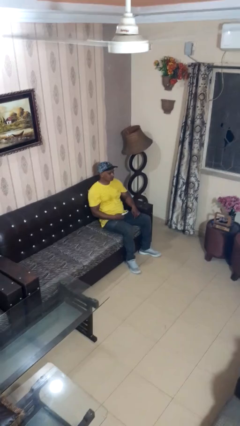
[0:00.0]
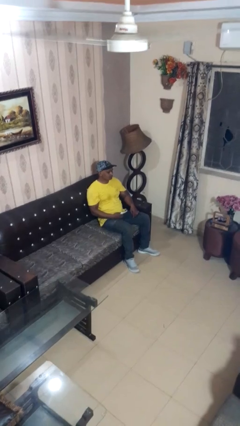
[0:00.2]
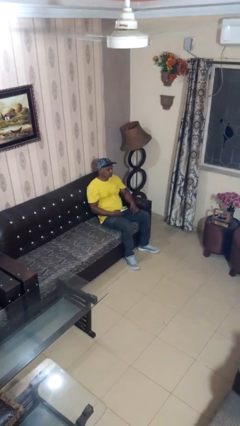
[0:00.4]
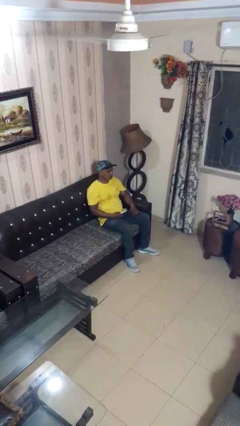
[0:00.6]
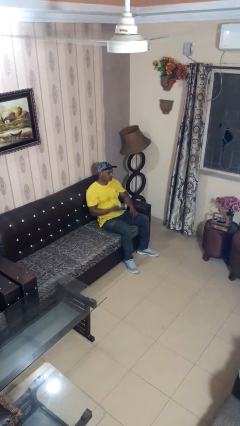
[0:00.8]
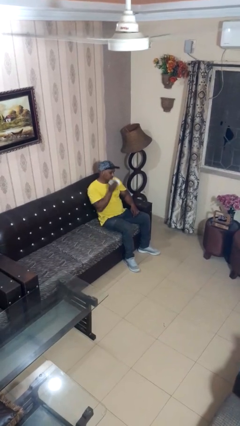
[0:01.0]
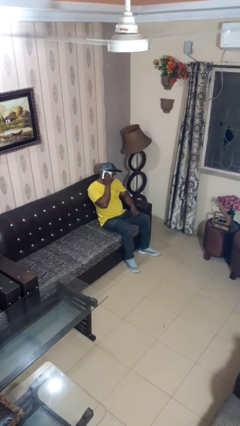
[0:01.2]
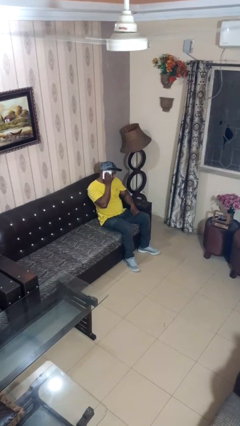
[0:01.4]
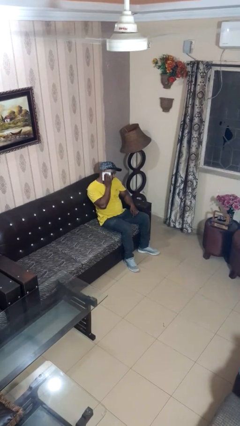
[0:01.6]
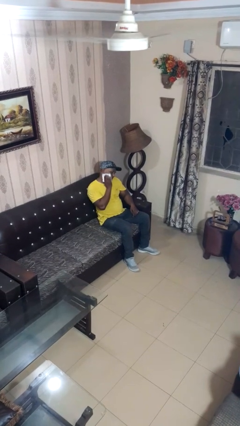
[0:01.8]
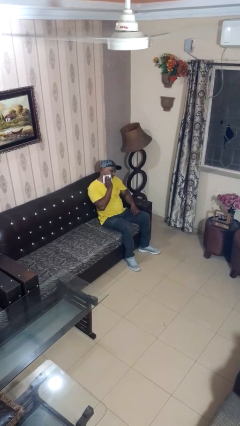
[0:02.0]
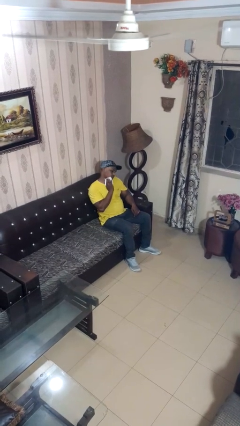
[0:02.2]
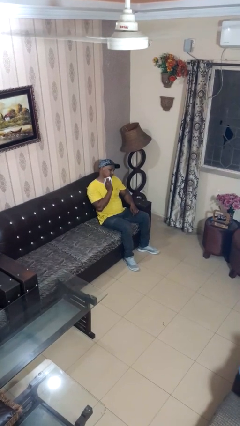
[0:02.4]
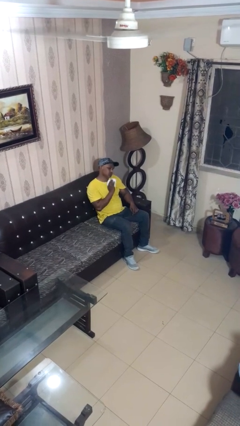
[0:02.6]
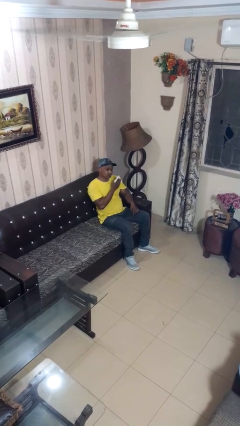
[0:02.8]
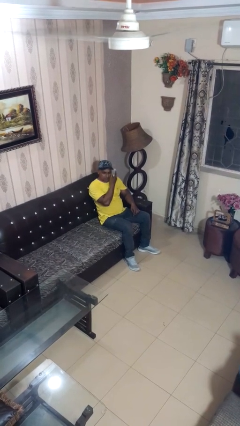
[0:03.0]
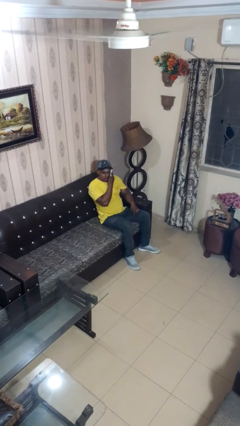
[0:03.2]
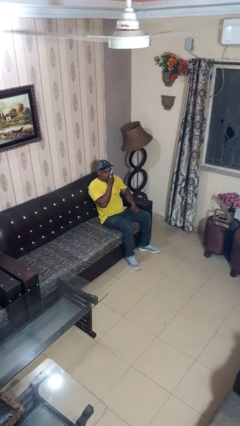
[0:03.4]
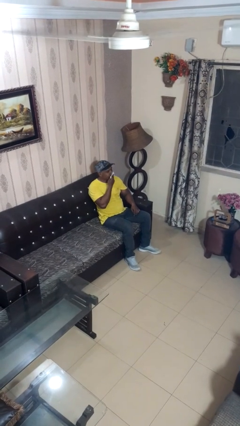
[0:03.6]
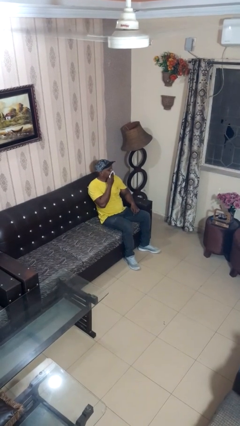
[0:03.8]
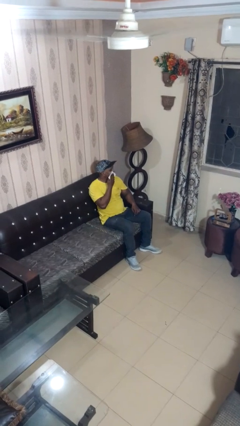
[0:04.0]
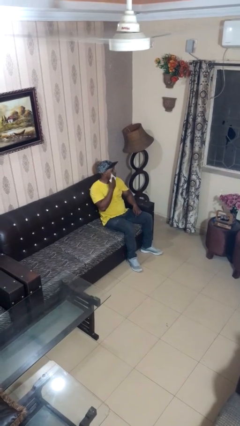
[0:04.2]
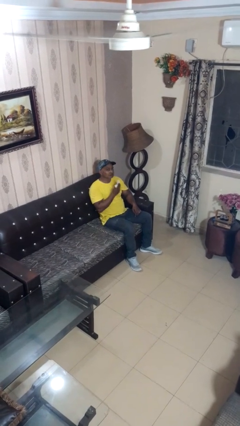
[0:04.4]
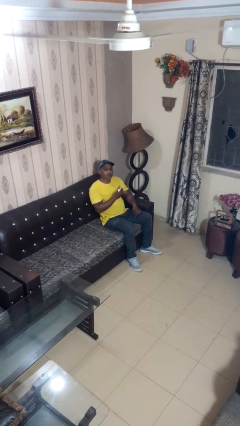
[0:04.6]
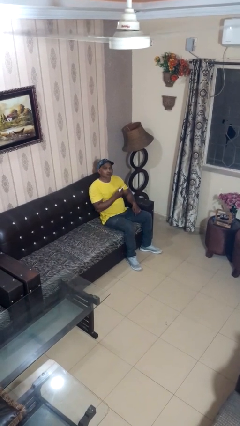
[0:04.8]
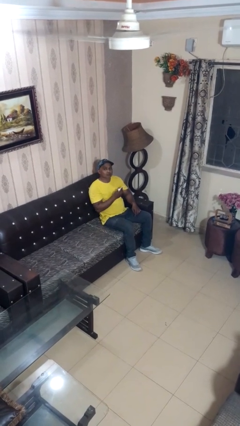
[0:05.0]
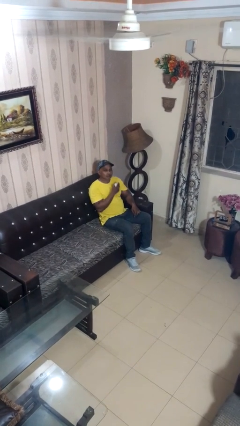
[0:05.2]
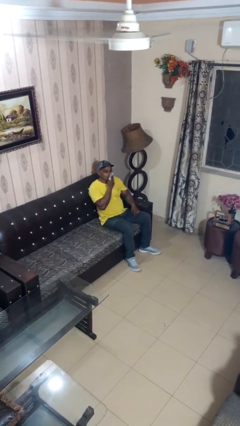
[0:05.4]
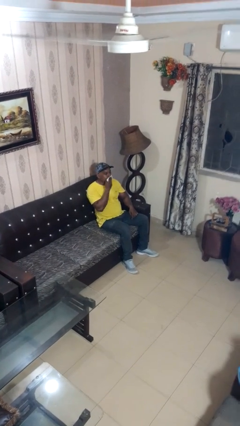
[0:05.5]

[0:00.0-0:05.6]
person wipes mouth with napkin

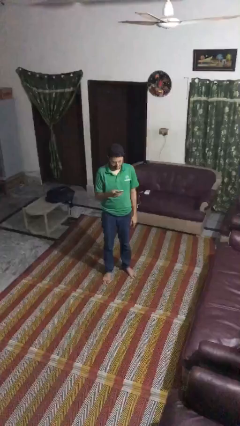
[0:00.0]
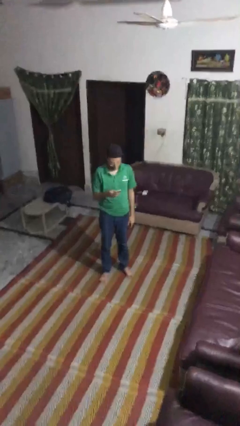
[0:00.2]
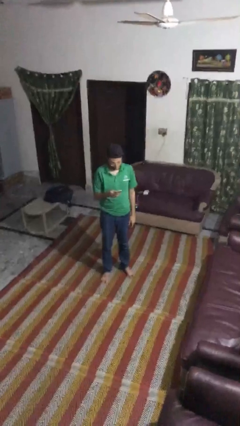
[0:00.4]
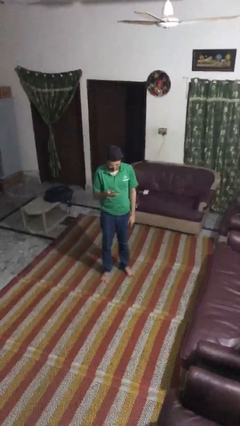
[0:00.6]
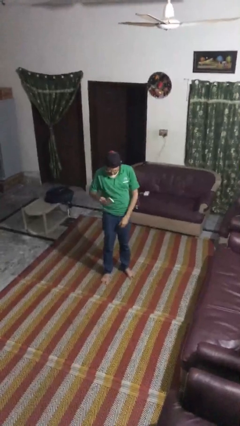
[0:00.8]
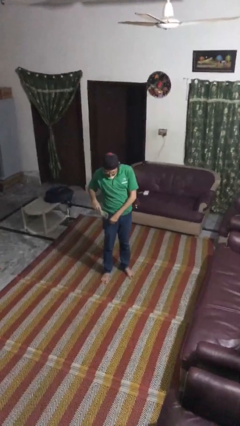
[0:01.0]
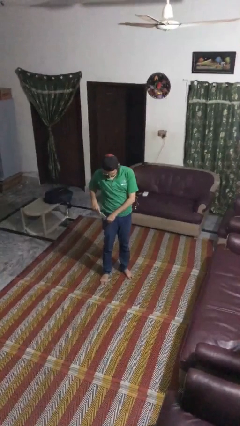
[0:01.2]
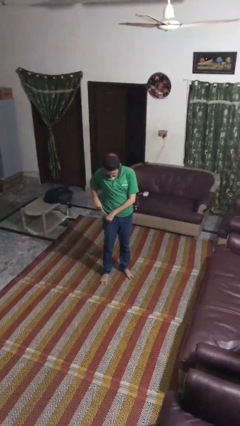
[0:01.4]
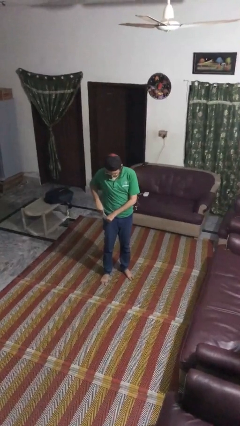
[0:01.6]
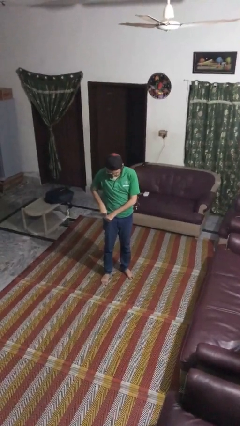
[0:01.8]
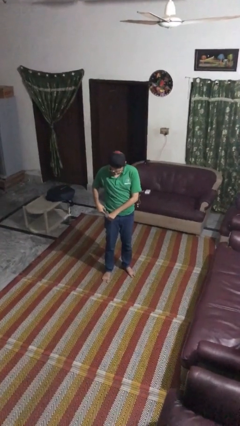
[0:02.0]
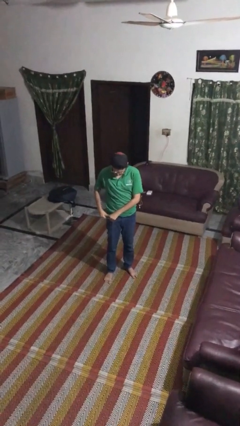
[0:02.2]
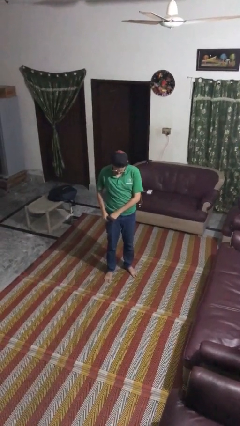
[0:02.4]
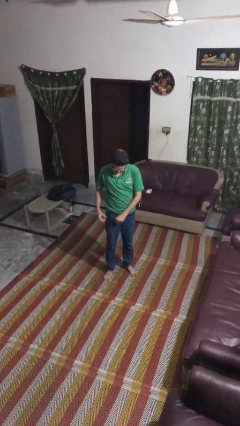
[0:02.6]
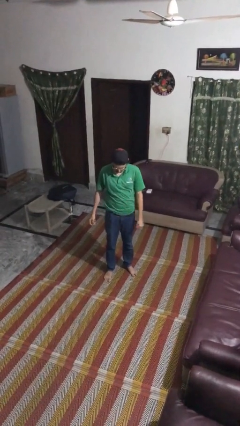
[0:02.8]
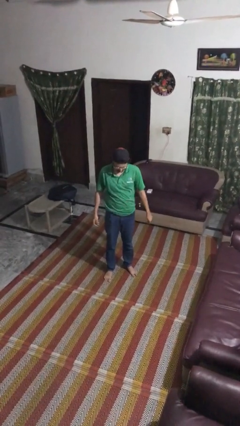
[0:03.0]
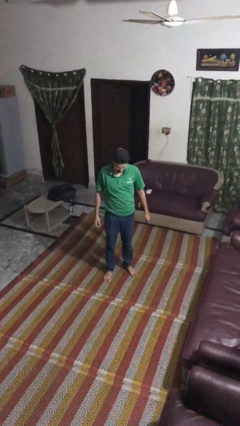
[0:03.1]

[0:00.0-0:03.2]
person puts phone into pocket

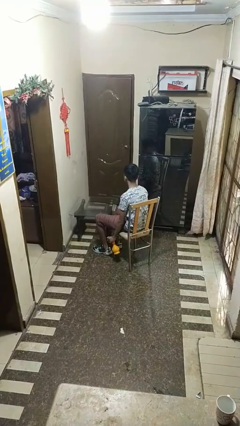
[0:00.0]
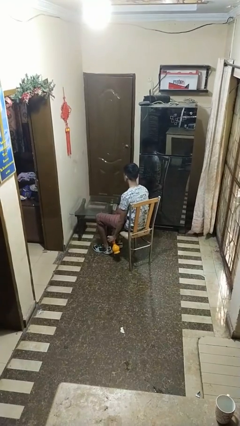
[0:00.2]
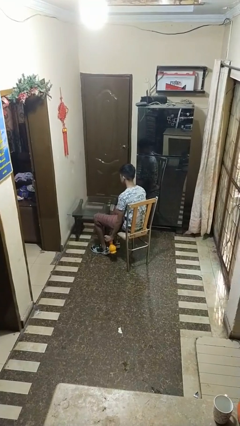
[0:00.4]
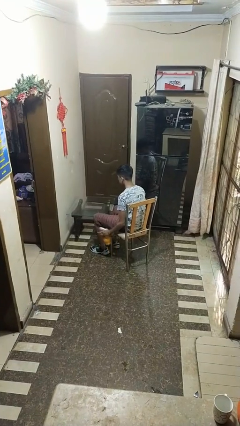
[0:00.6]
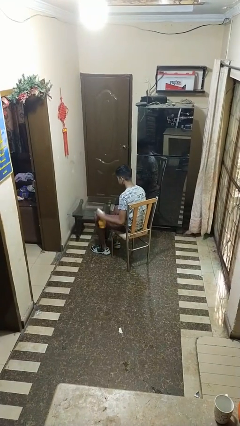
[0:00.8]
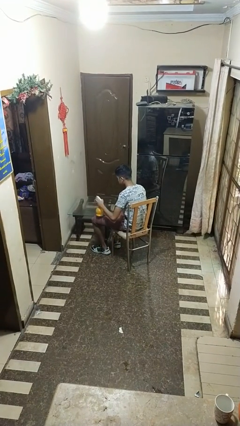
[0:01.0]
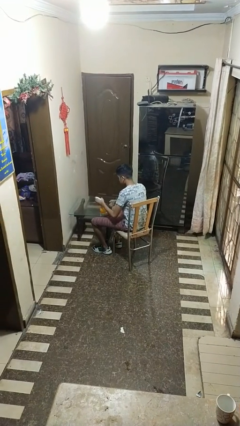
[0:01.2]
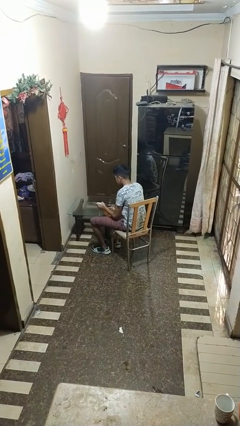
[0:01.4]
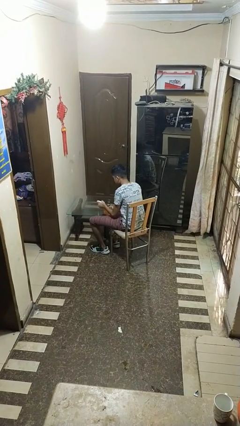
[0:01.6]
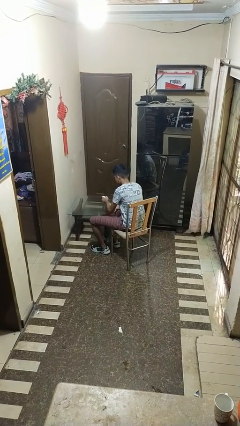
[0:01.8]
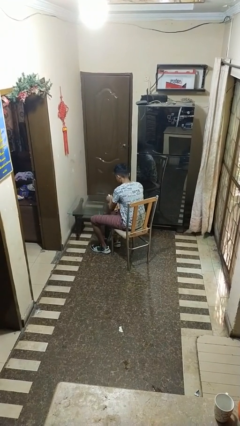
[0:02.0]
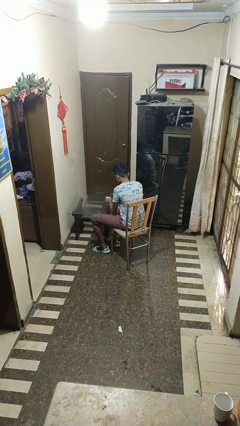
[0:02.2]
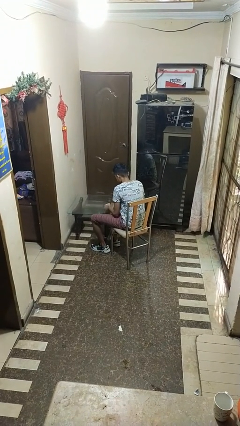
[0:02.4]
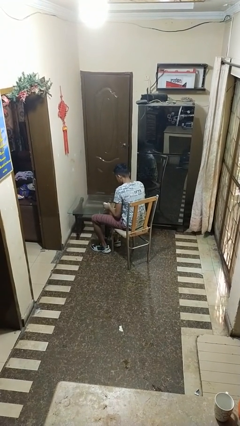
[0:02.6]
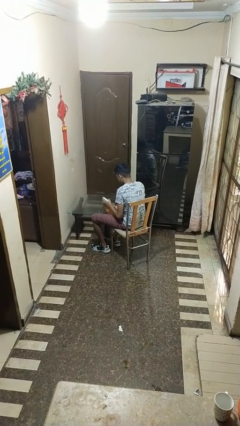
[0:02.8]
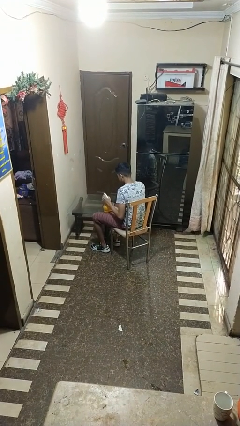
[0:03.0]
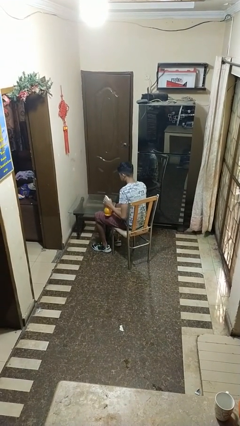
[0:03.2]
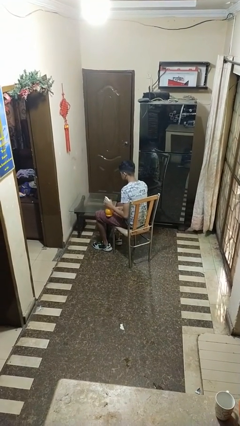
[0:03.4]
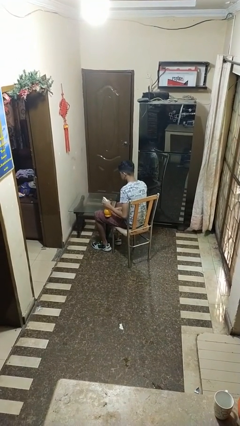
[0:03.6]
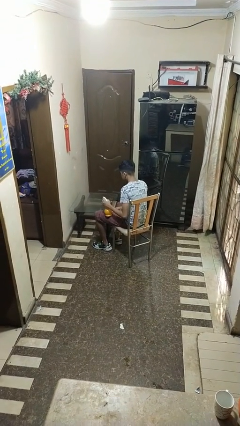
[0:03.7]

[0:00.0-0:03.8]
person sprays from bottle

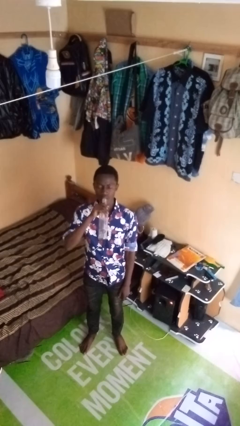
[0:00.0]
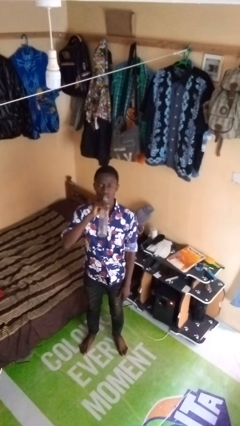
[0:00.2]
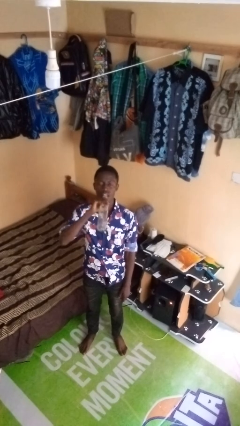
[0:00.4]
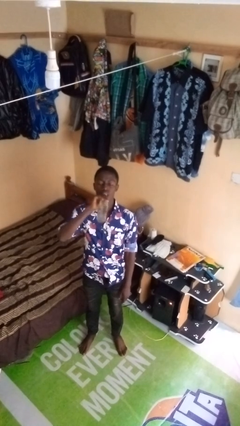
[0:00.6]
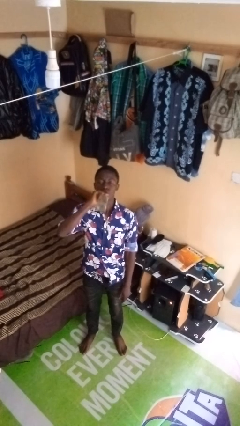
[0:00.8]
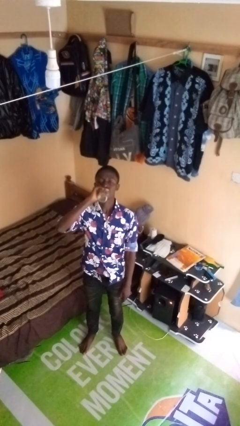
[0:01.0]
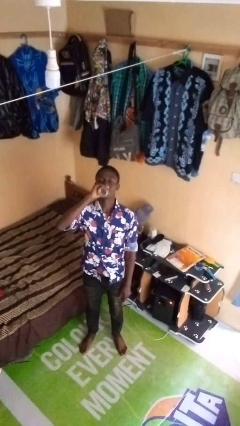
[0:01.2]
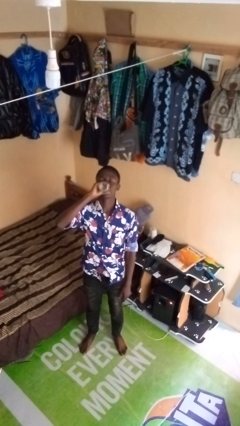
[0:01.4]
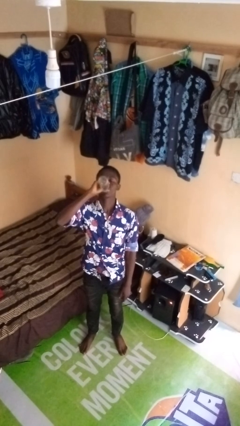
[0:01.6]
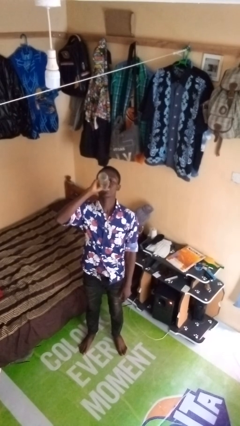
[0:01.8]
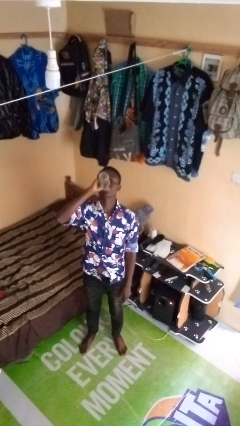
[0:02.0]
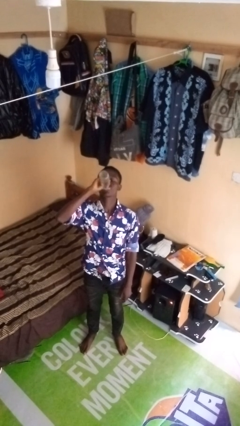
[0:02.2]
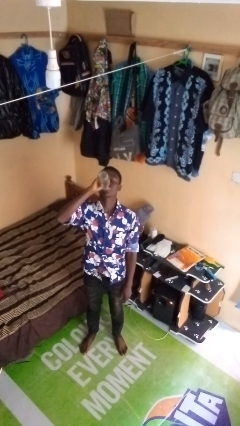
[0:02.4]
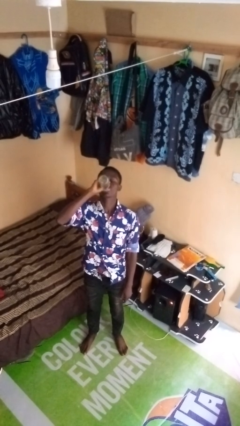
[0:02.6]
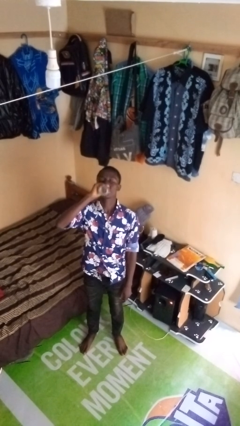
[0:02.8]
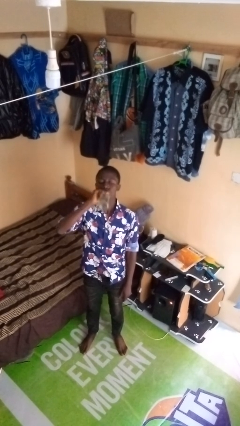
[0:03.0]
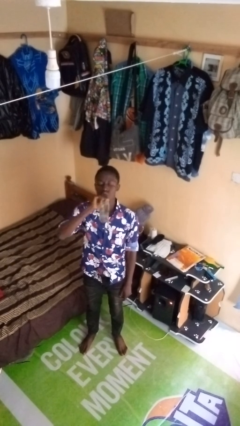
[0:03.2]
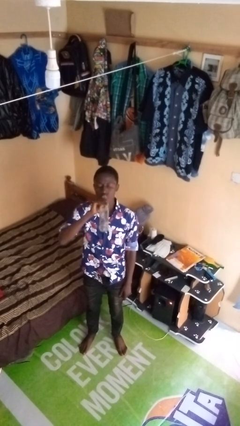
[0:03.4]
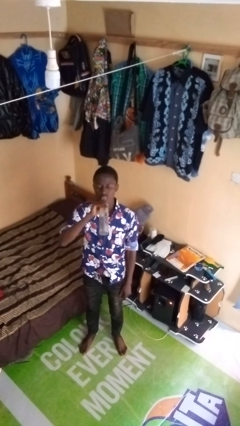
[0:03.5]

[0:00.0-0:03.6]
person drinks from bottle

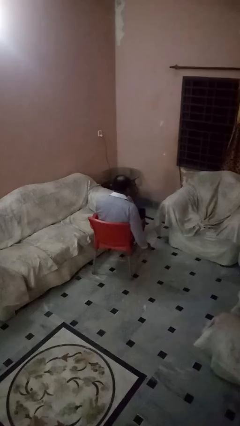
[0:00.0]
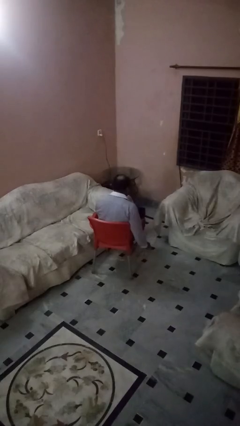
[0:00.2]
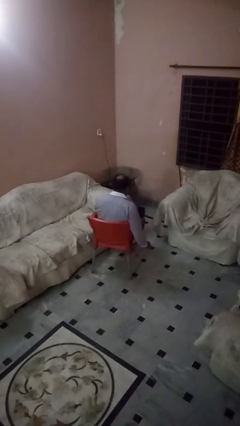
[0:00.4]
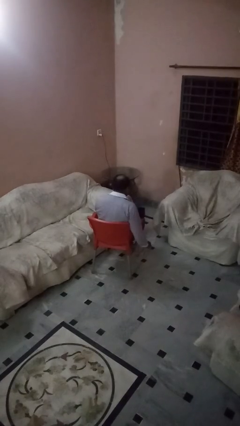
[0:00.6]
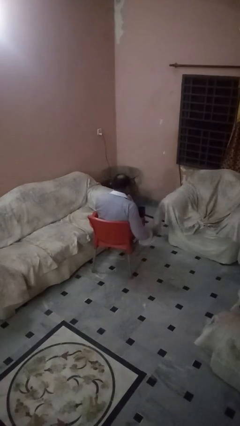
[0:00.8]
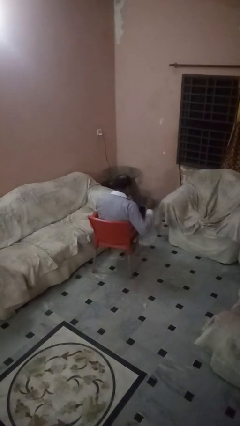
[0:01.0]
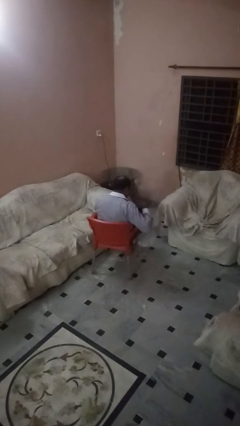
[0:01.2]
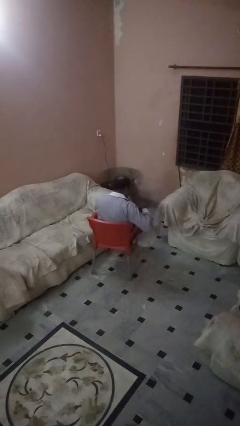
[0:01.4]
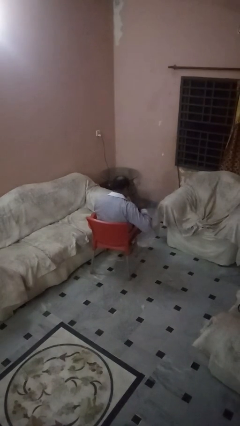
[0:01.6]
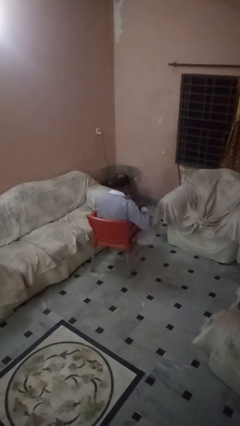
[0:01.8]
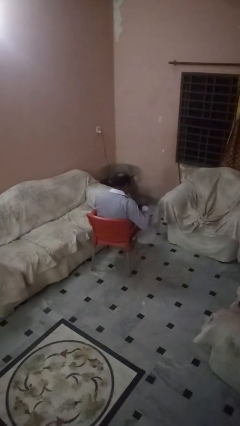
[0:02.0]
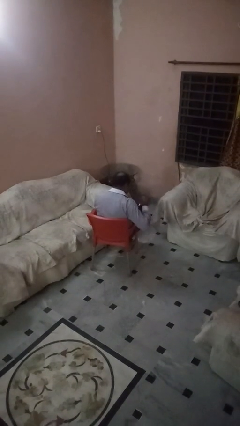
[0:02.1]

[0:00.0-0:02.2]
person stirs mug
